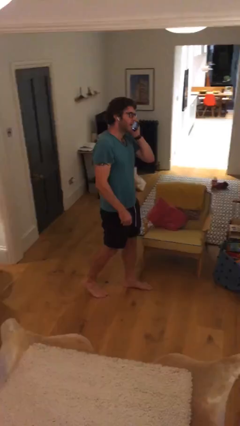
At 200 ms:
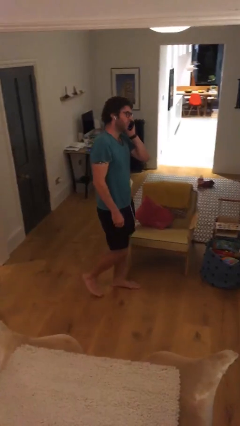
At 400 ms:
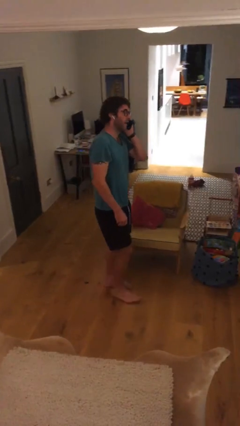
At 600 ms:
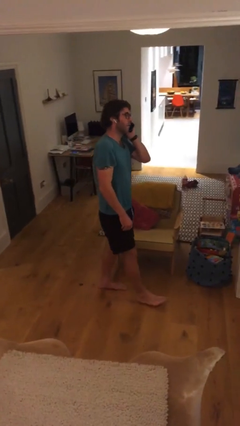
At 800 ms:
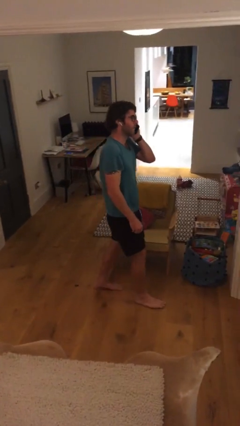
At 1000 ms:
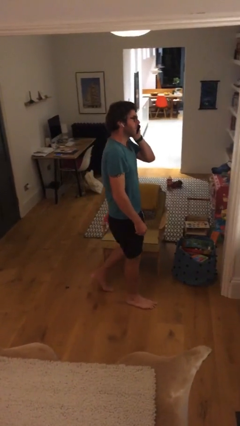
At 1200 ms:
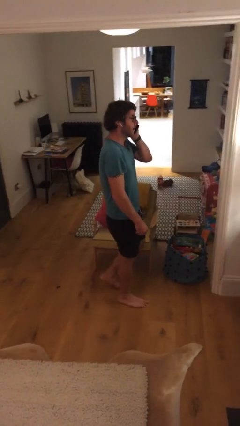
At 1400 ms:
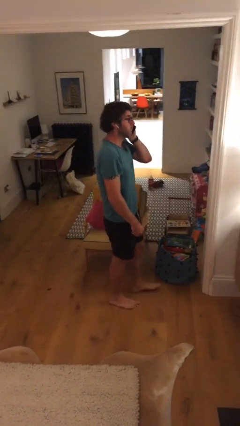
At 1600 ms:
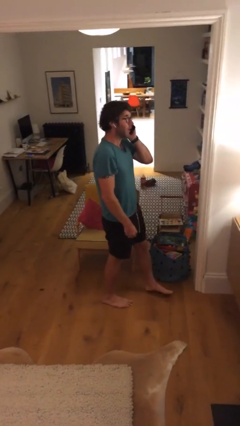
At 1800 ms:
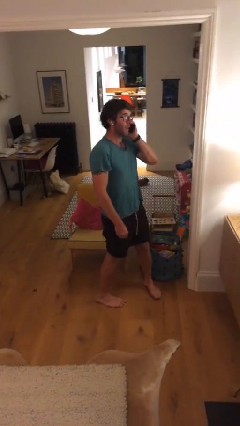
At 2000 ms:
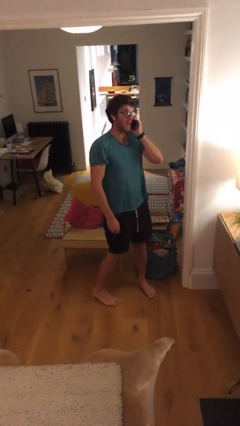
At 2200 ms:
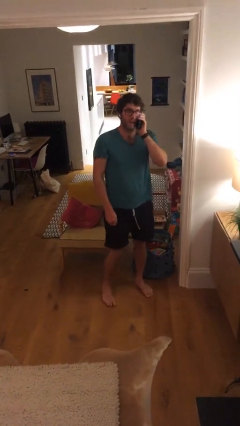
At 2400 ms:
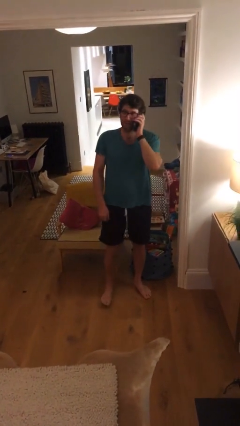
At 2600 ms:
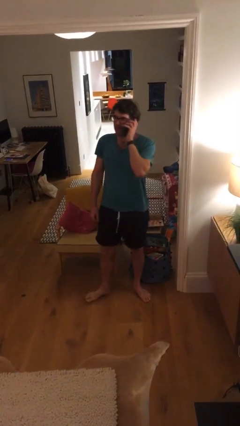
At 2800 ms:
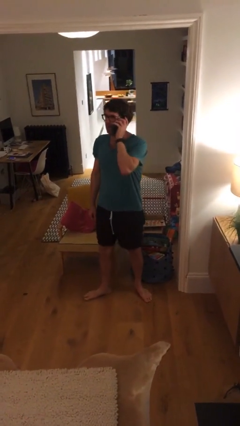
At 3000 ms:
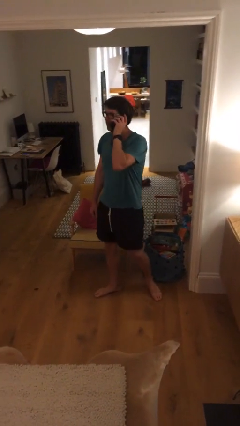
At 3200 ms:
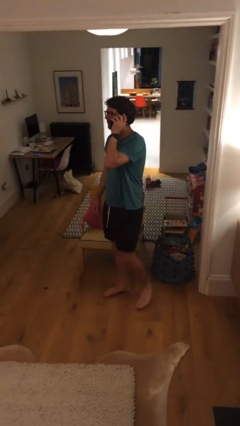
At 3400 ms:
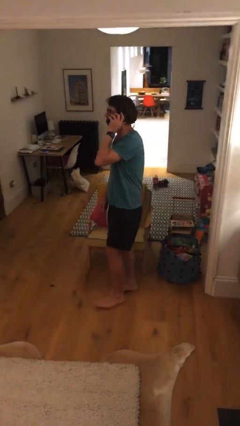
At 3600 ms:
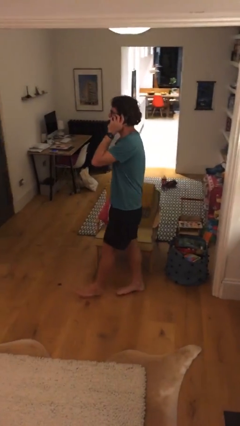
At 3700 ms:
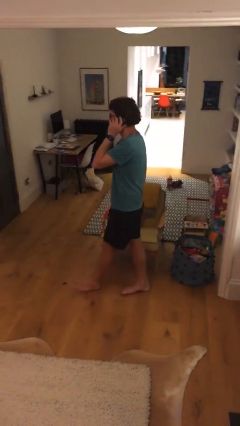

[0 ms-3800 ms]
person talks on phone

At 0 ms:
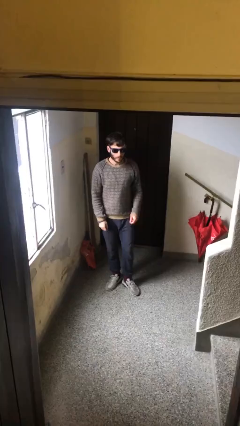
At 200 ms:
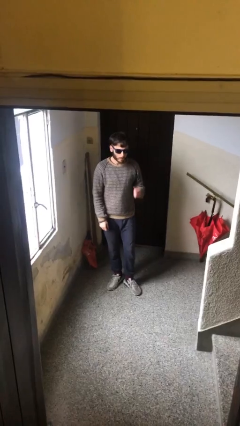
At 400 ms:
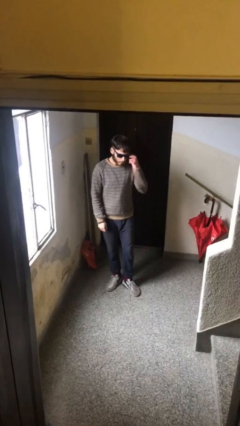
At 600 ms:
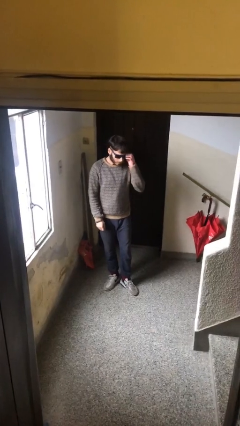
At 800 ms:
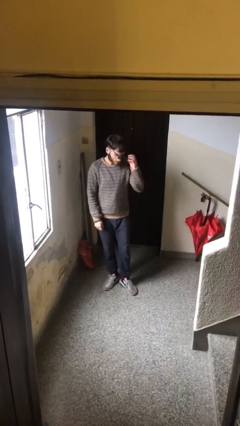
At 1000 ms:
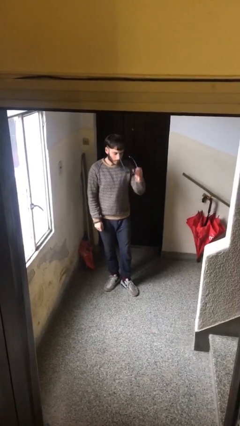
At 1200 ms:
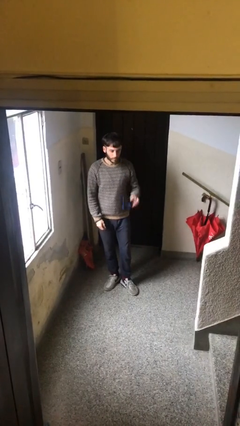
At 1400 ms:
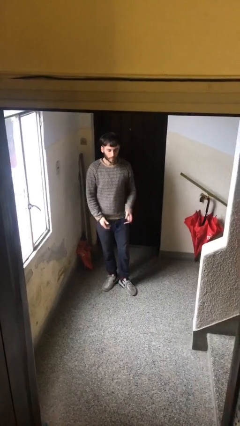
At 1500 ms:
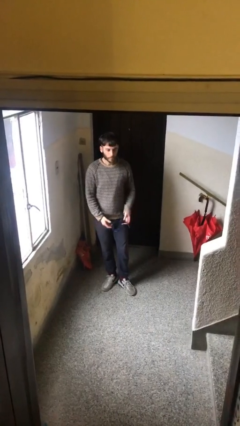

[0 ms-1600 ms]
person takes off sunglasses

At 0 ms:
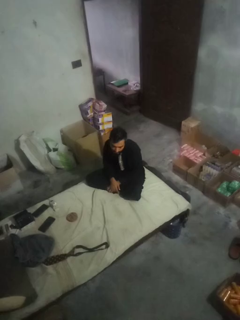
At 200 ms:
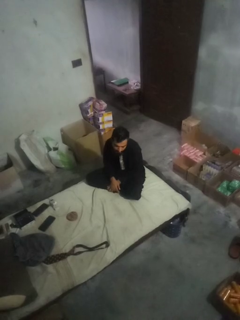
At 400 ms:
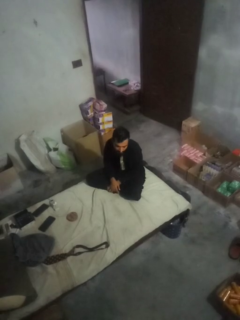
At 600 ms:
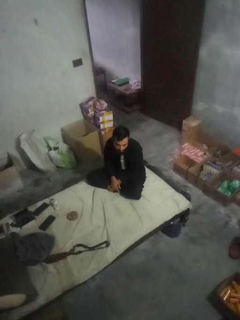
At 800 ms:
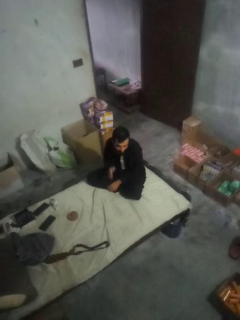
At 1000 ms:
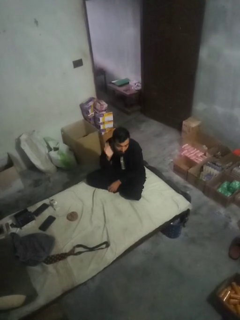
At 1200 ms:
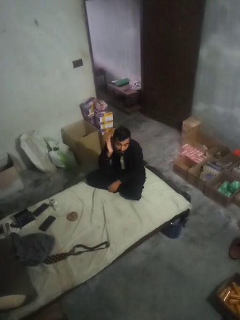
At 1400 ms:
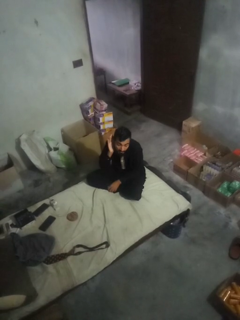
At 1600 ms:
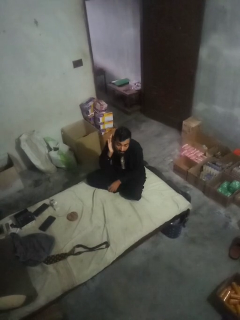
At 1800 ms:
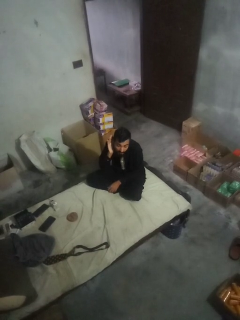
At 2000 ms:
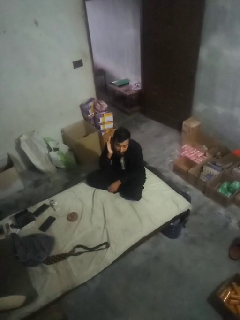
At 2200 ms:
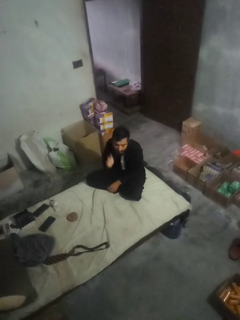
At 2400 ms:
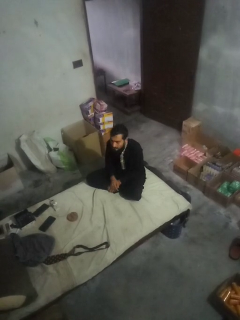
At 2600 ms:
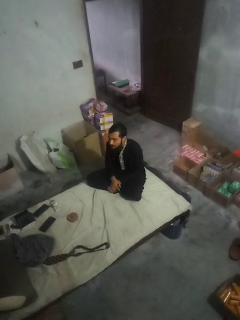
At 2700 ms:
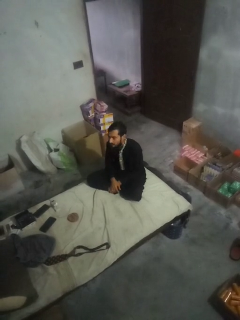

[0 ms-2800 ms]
person gestures listen closely

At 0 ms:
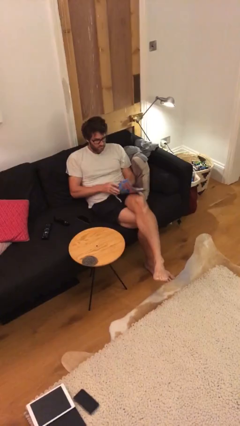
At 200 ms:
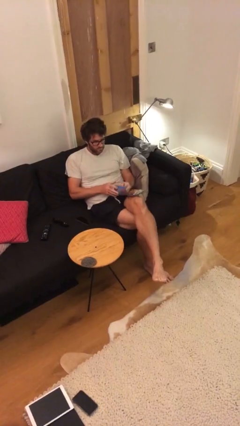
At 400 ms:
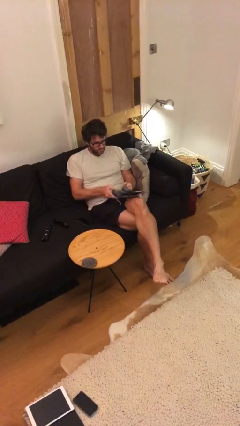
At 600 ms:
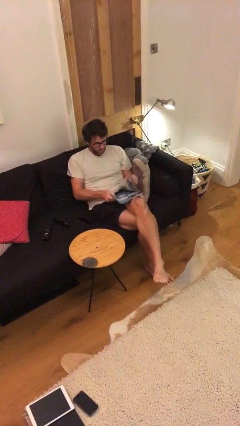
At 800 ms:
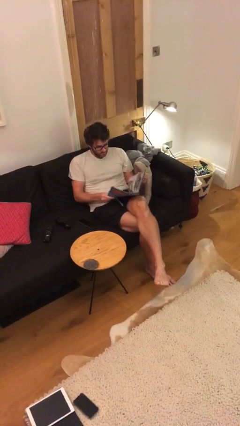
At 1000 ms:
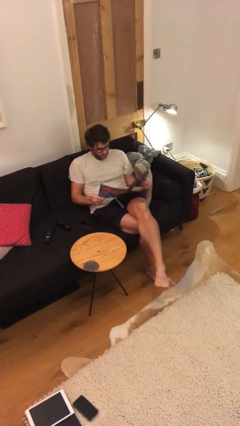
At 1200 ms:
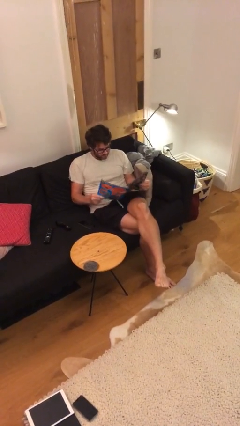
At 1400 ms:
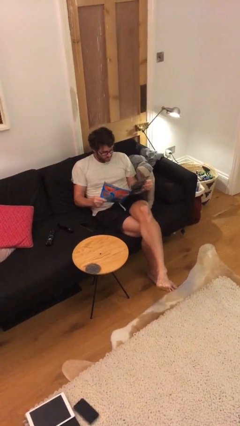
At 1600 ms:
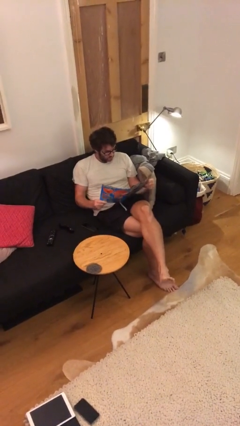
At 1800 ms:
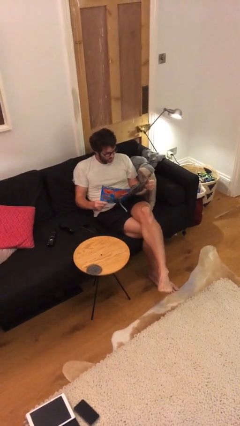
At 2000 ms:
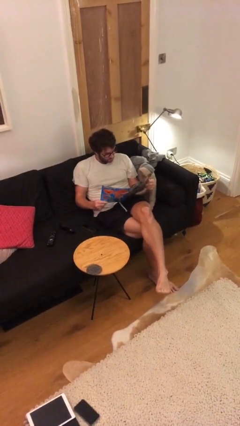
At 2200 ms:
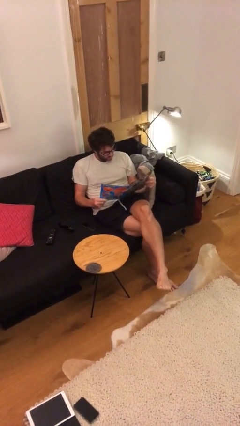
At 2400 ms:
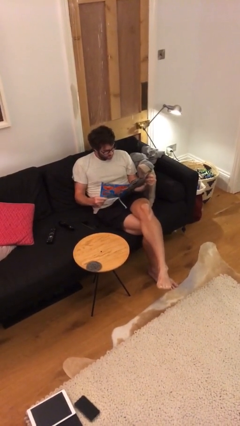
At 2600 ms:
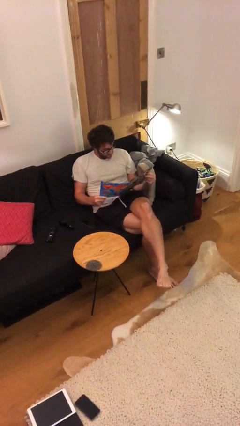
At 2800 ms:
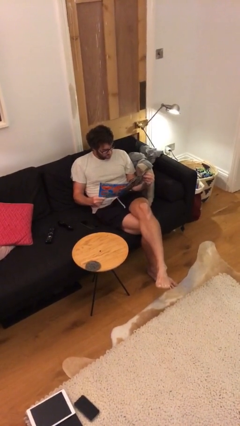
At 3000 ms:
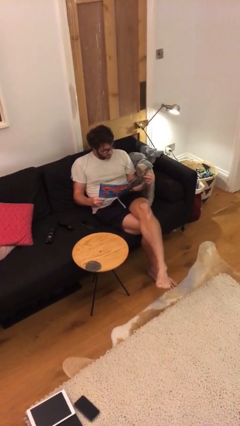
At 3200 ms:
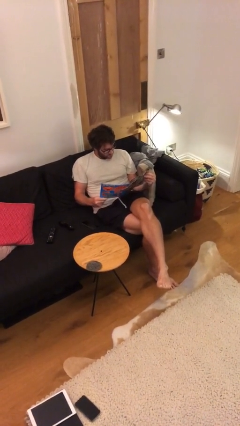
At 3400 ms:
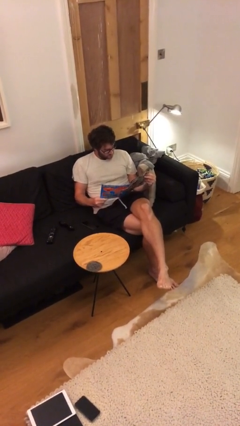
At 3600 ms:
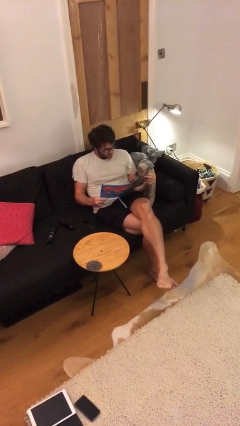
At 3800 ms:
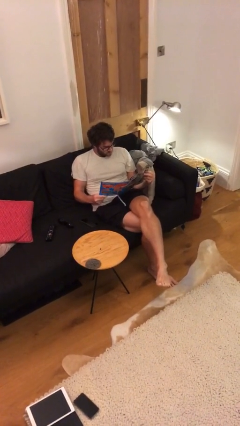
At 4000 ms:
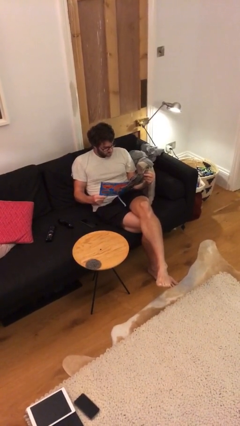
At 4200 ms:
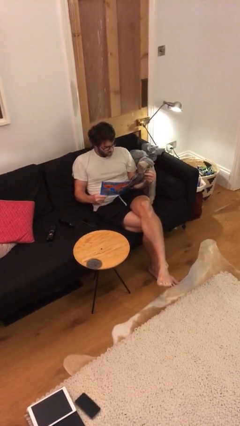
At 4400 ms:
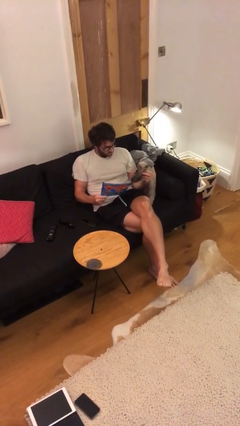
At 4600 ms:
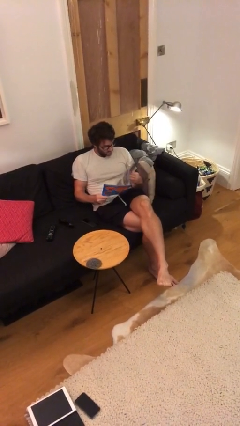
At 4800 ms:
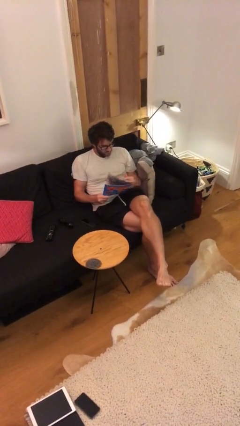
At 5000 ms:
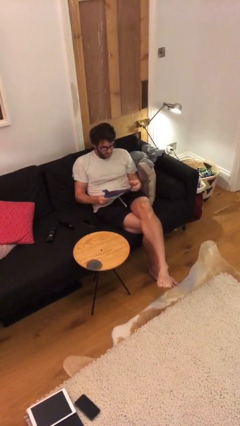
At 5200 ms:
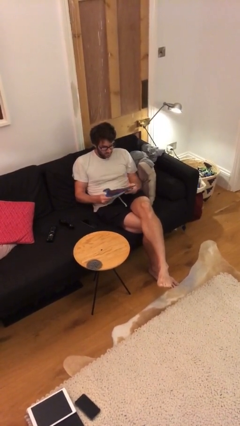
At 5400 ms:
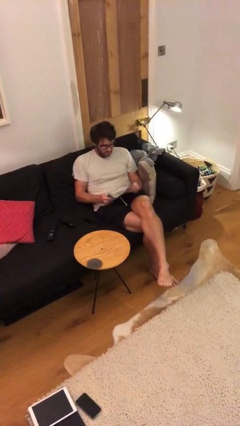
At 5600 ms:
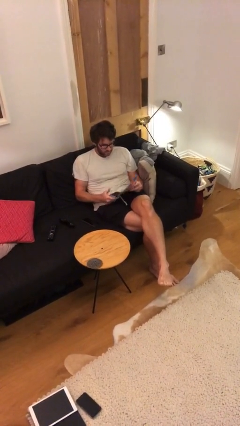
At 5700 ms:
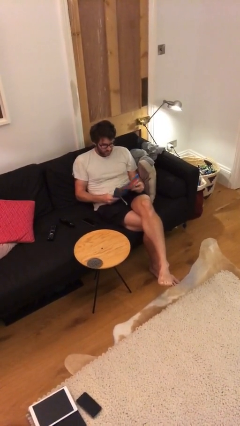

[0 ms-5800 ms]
person reads document

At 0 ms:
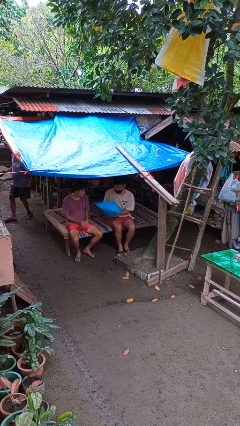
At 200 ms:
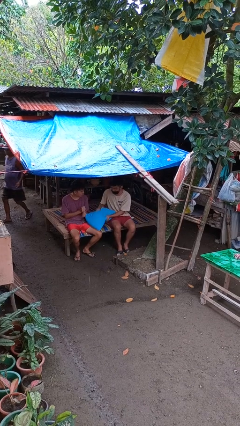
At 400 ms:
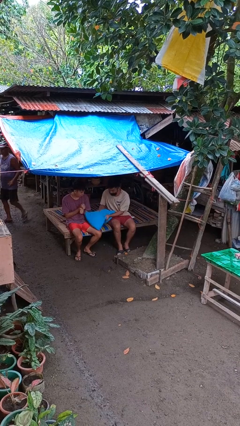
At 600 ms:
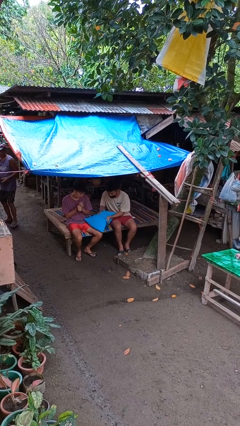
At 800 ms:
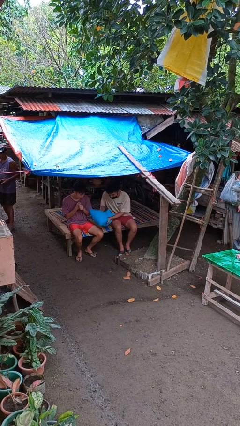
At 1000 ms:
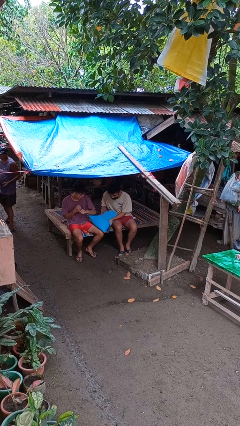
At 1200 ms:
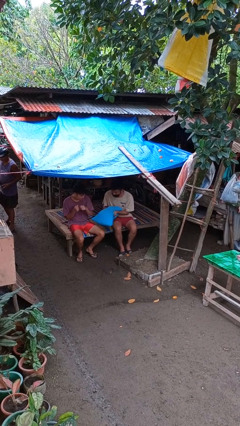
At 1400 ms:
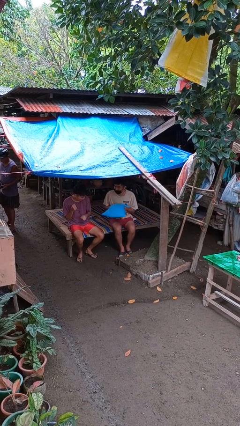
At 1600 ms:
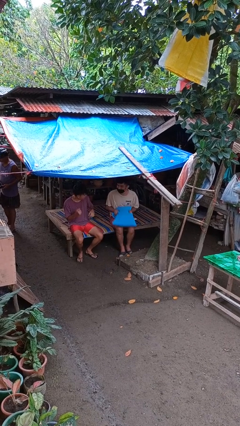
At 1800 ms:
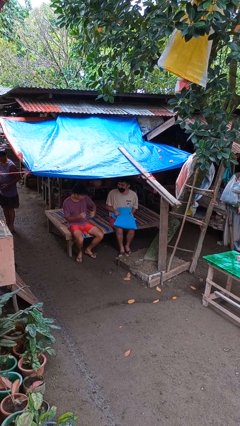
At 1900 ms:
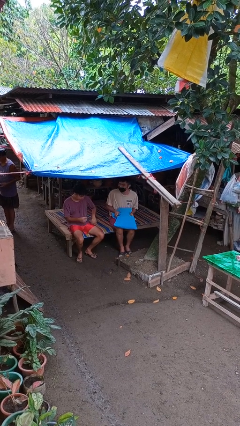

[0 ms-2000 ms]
person hits person with pillow

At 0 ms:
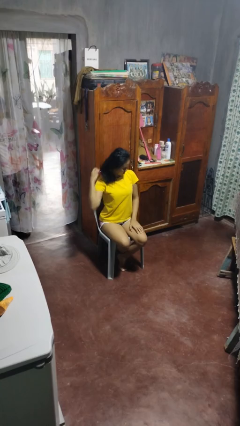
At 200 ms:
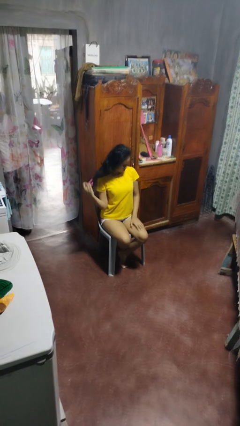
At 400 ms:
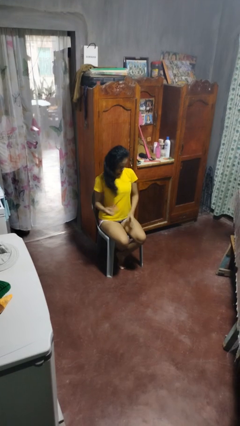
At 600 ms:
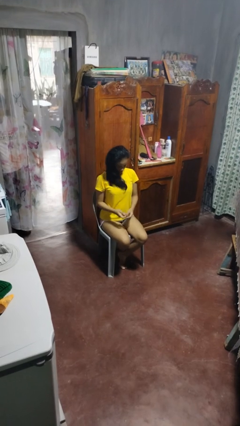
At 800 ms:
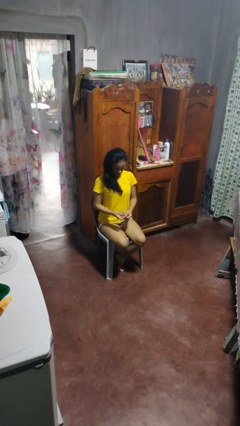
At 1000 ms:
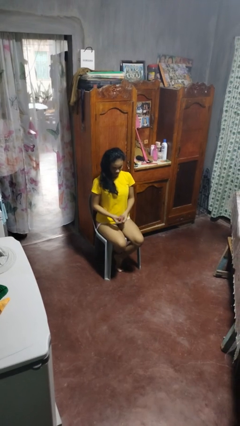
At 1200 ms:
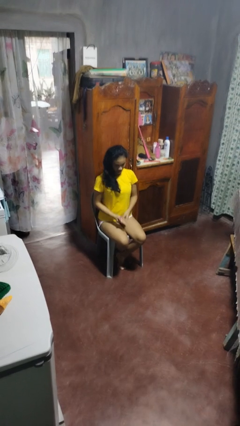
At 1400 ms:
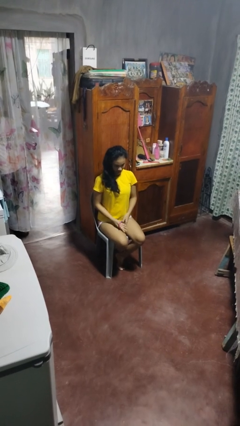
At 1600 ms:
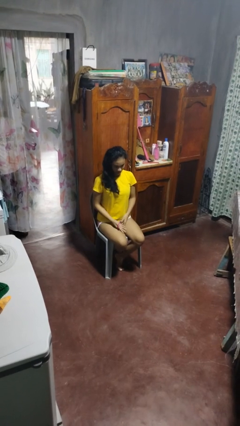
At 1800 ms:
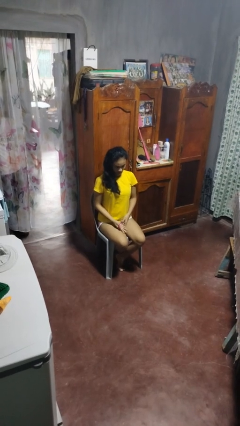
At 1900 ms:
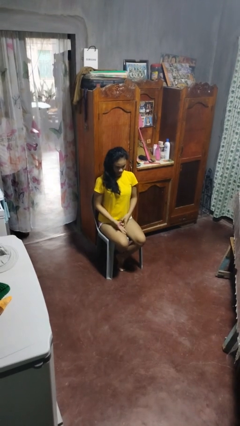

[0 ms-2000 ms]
person takes off hairtie

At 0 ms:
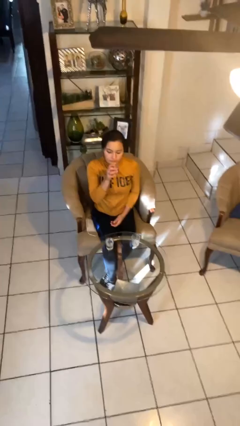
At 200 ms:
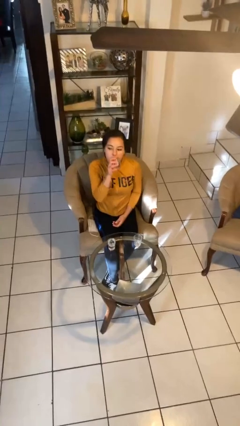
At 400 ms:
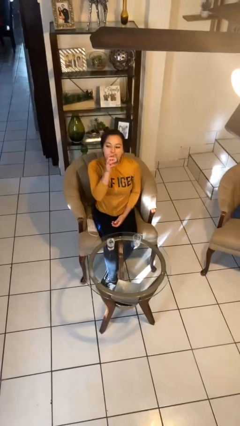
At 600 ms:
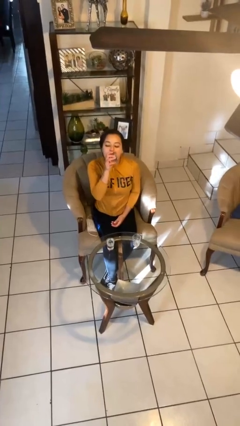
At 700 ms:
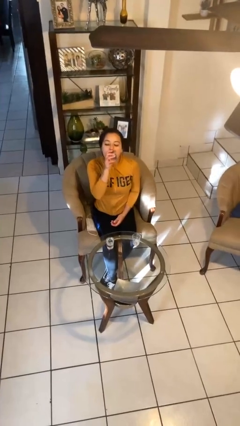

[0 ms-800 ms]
person drinks from shotglass
